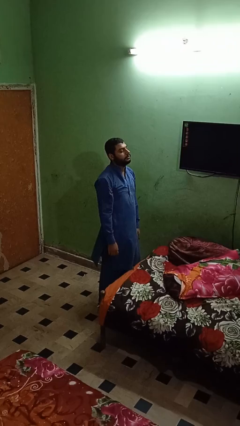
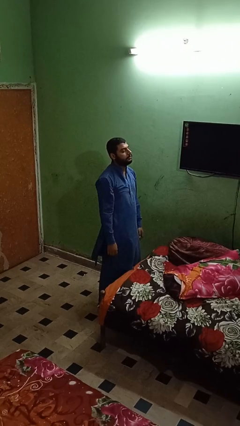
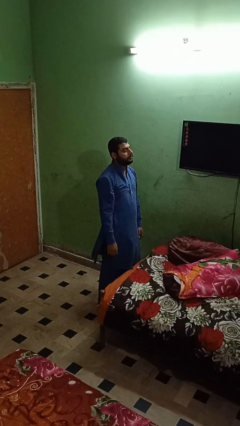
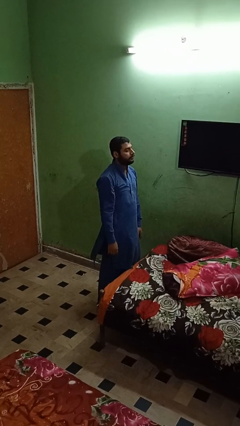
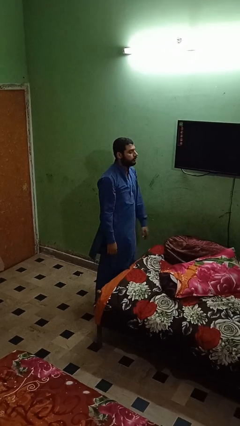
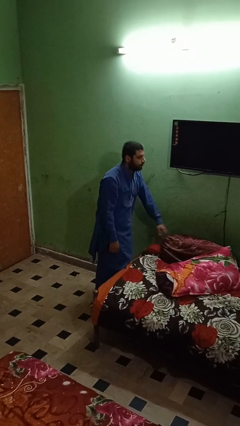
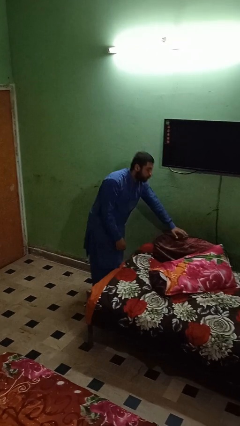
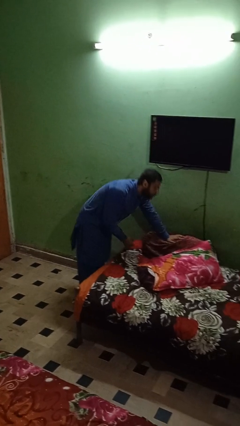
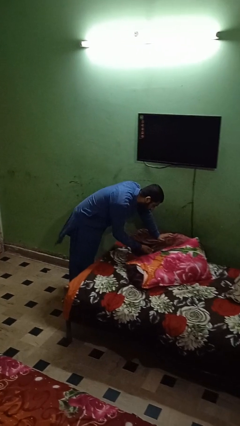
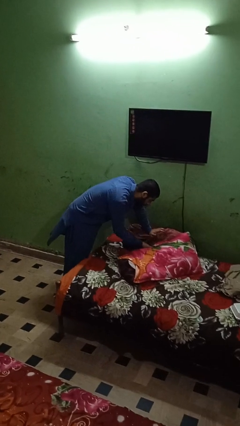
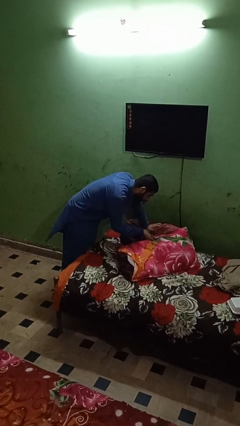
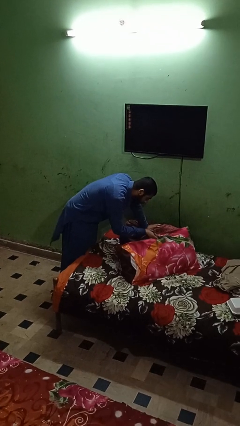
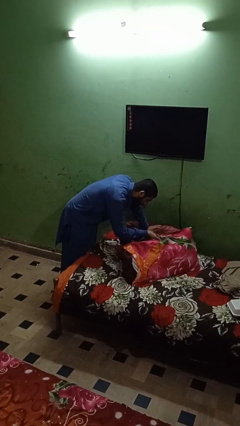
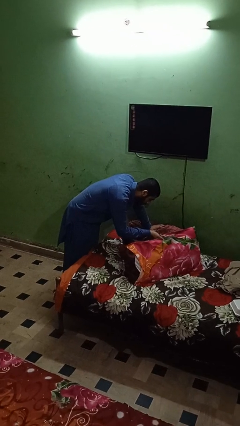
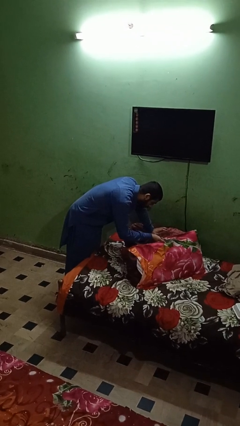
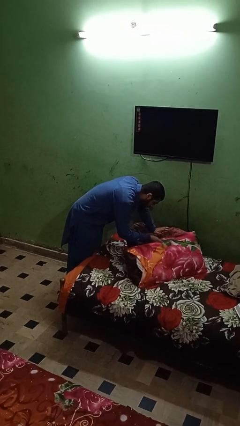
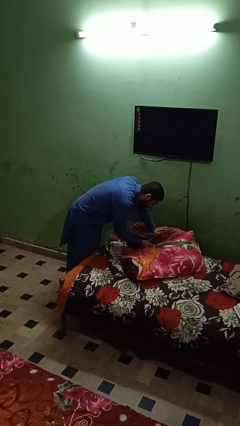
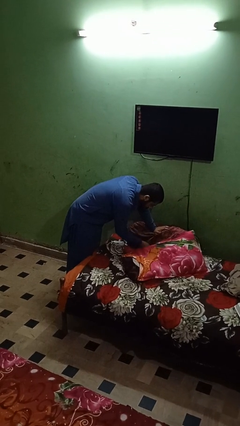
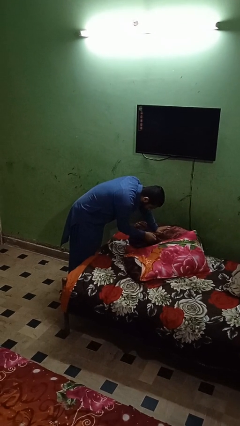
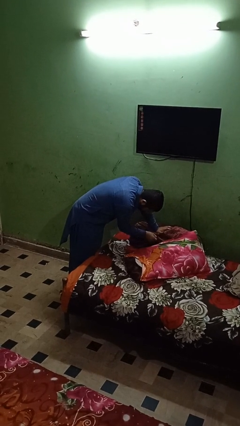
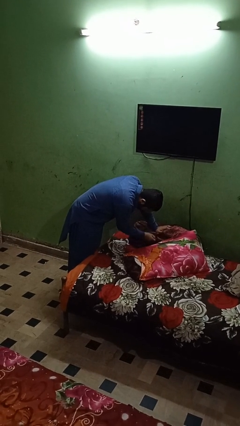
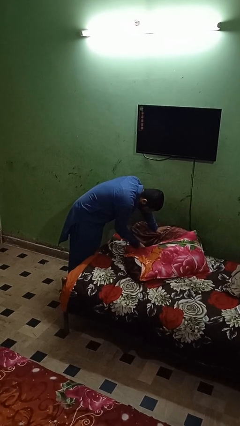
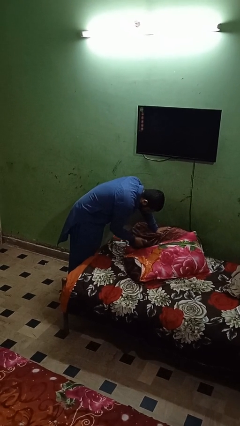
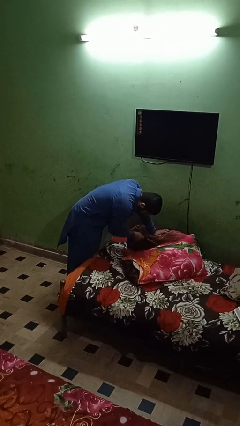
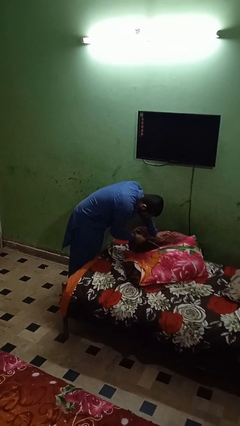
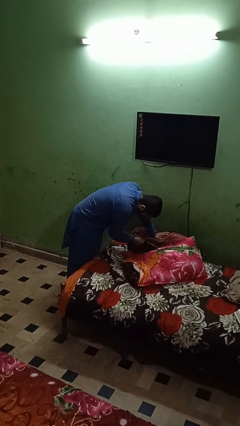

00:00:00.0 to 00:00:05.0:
person searches in couch

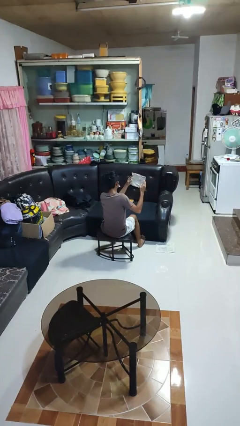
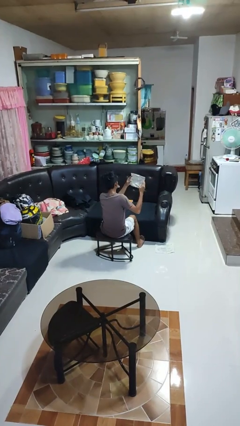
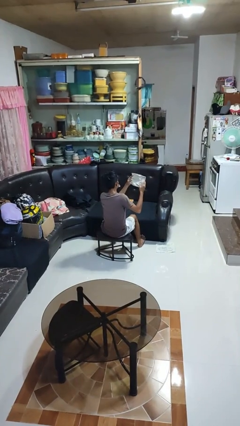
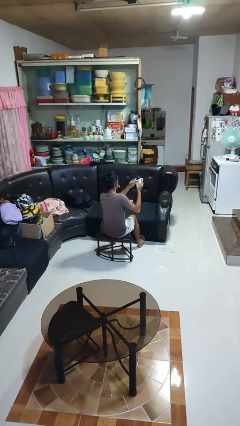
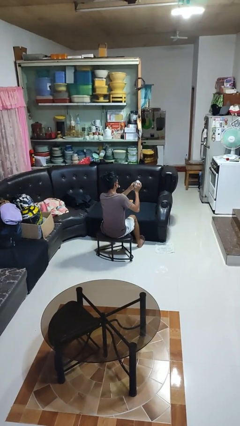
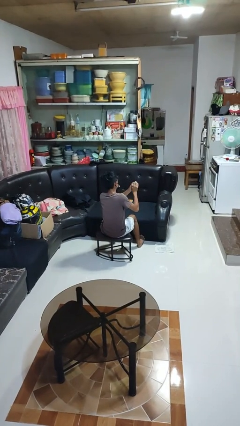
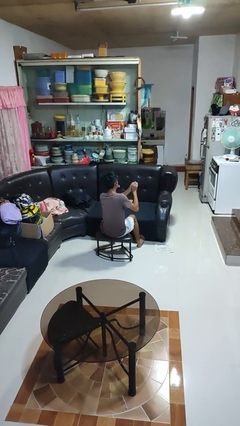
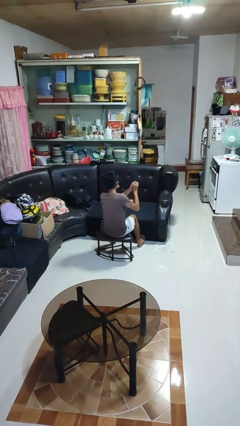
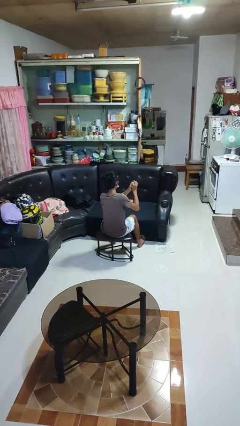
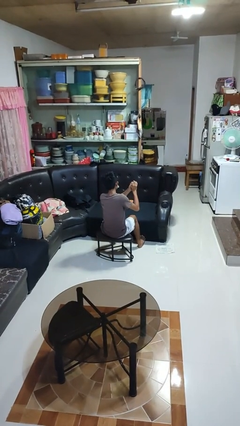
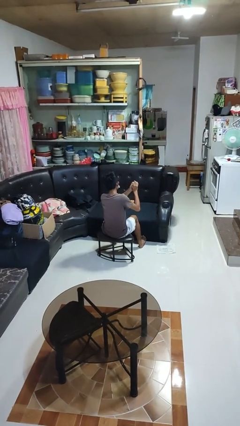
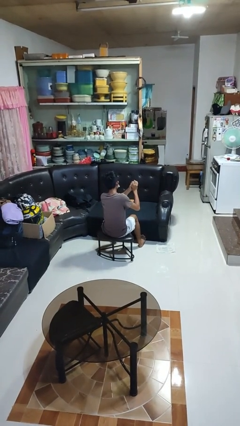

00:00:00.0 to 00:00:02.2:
person crumples paper

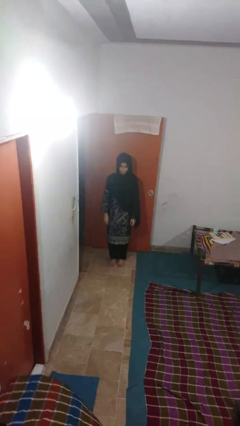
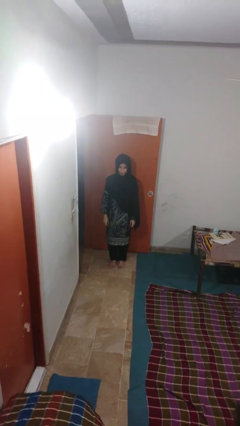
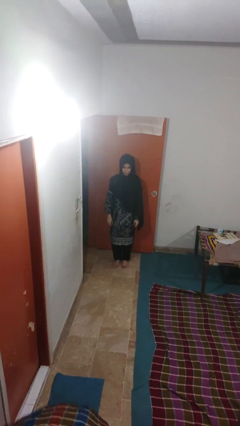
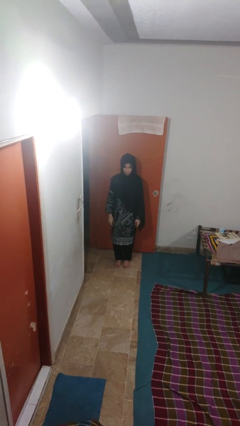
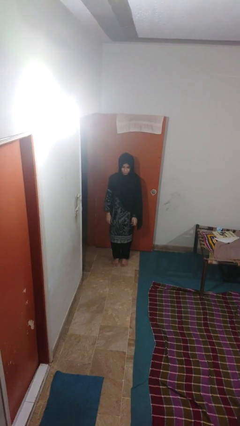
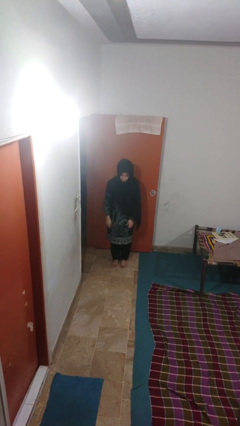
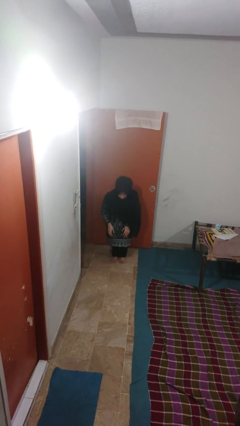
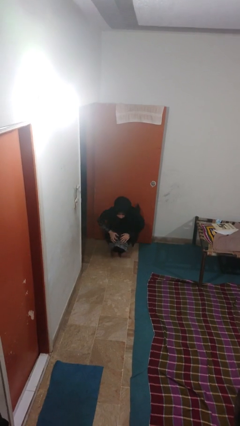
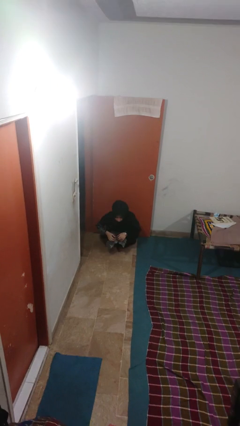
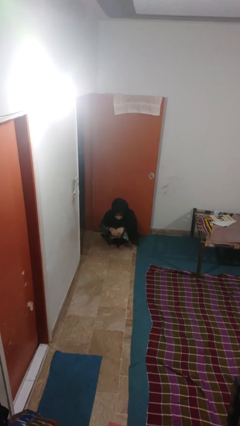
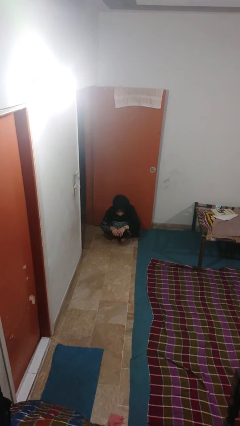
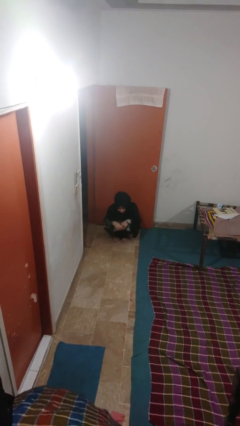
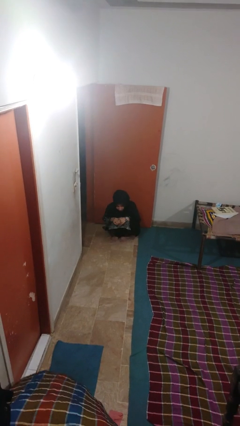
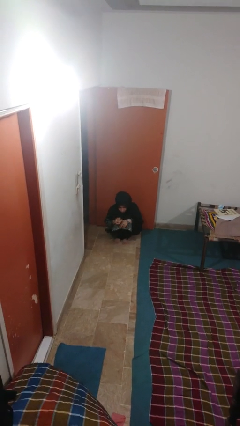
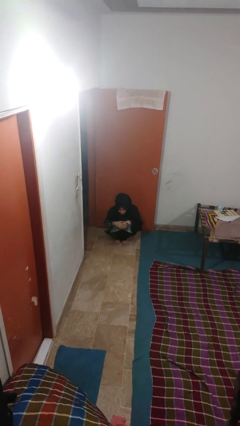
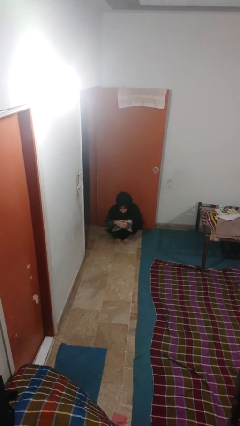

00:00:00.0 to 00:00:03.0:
person squats

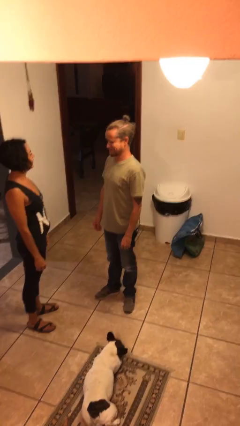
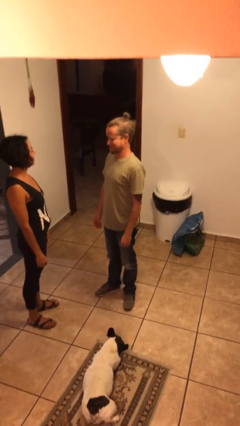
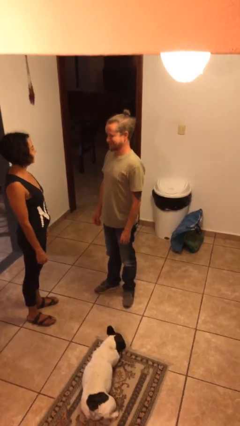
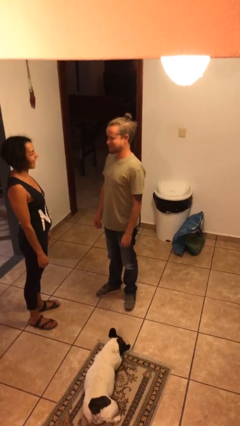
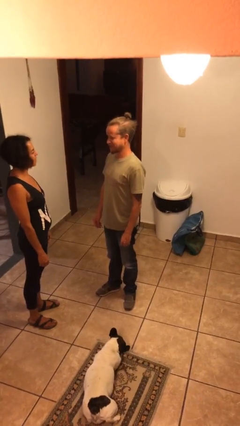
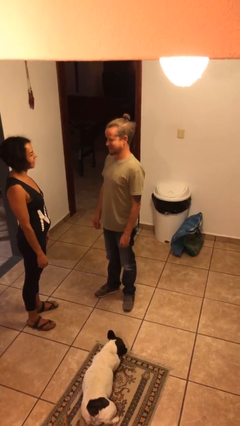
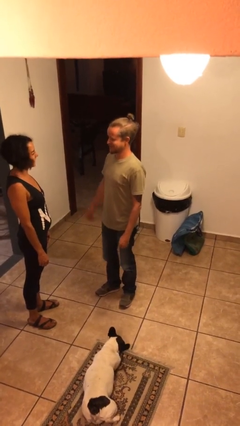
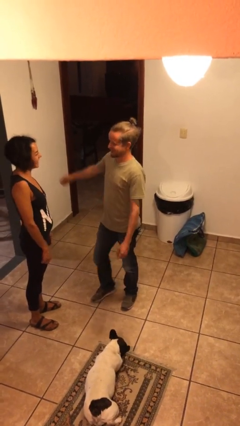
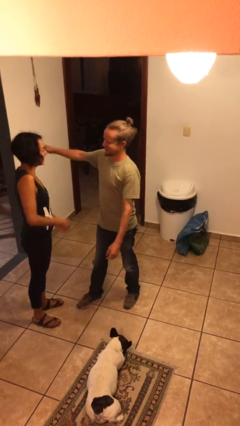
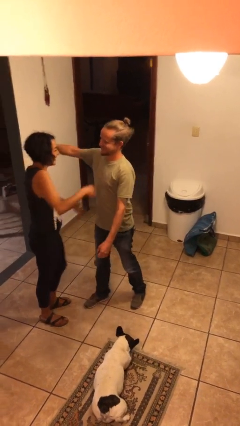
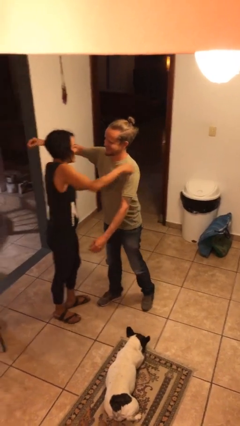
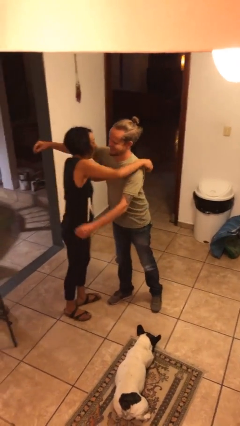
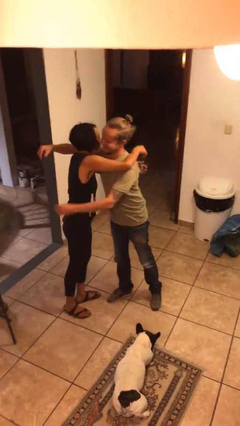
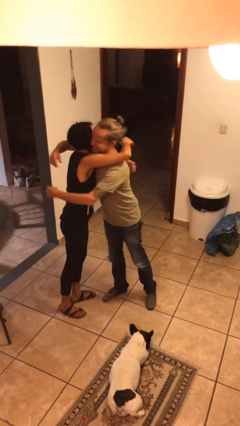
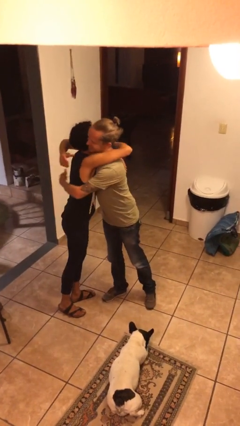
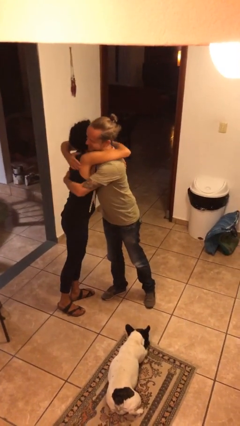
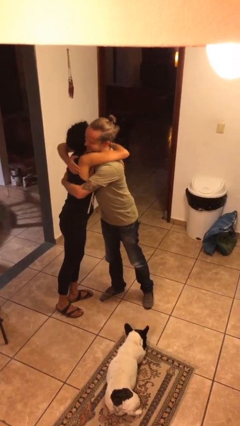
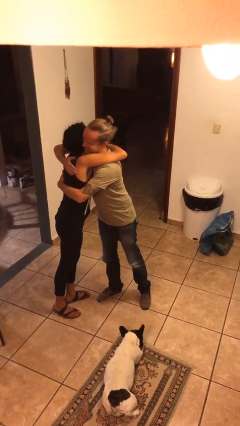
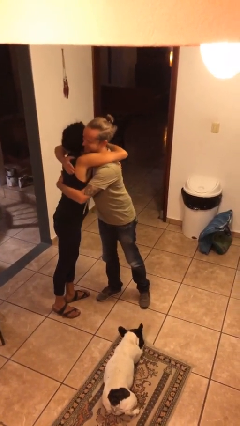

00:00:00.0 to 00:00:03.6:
person embraces person

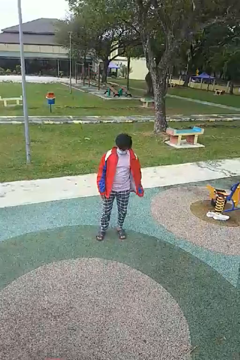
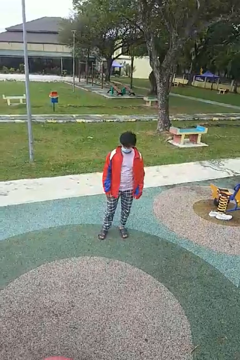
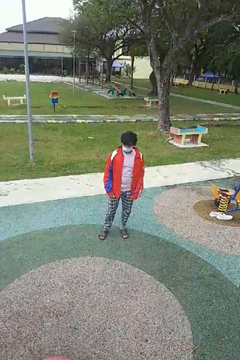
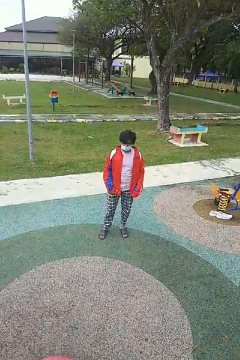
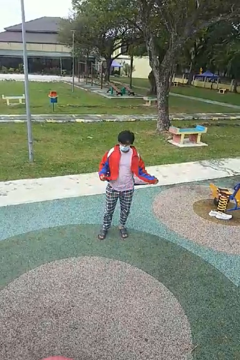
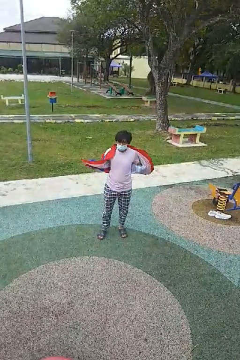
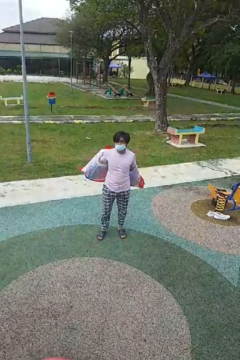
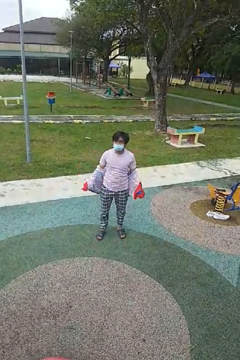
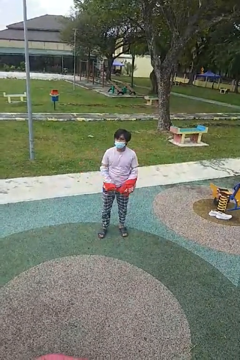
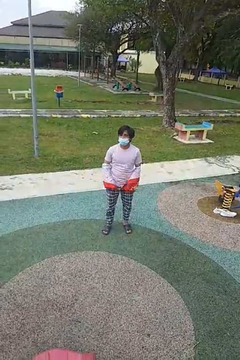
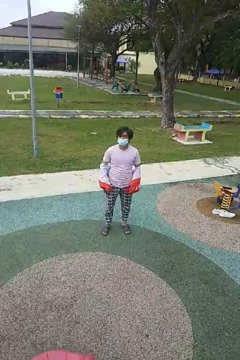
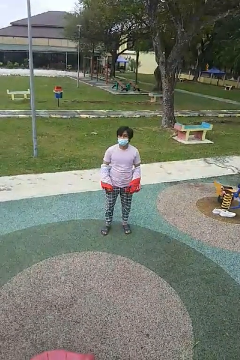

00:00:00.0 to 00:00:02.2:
person takes off jacket

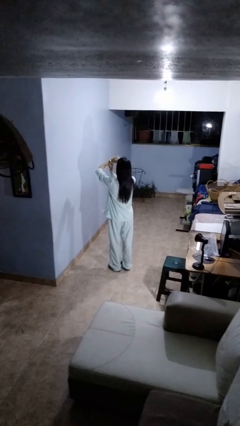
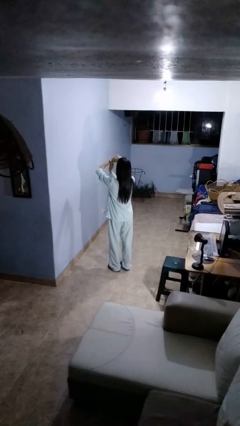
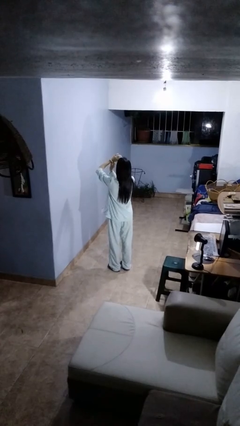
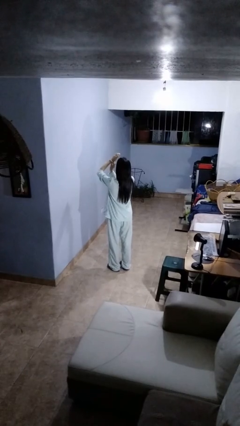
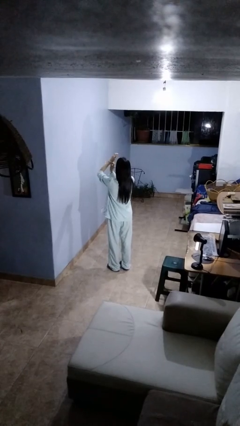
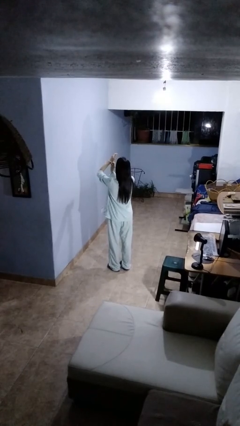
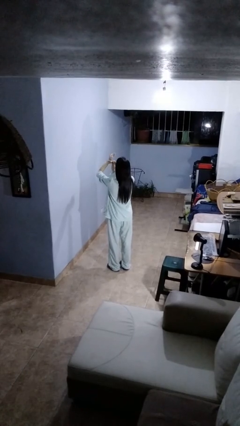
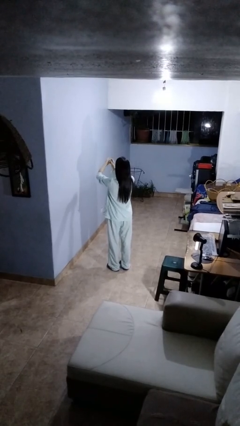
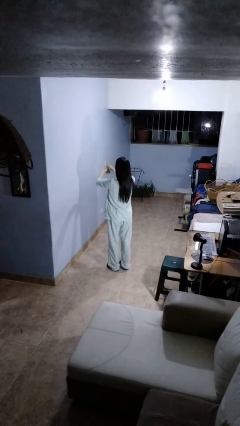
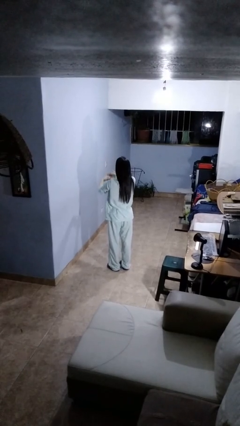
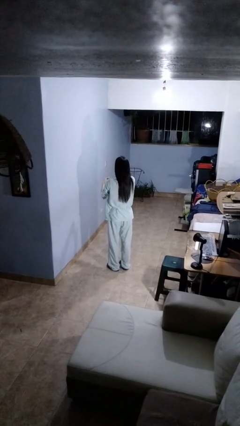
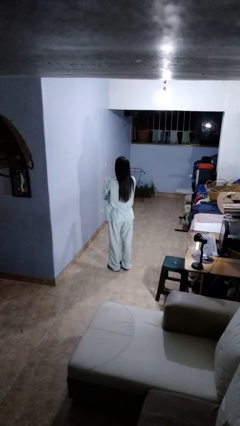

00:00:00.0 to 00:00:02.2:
person takes off wristwatch
